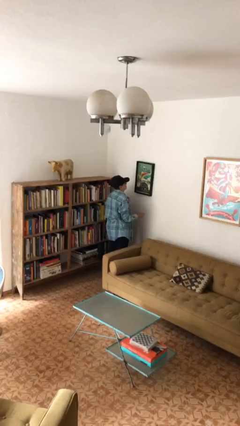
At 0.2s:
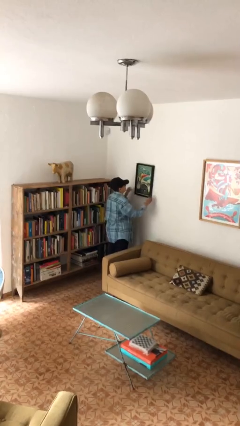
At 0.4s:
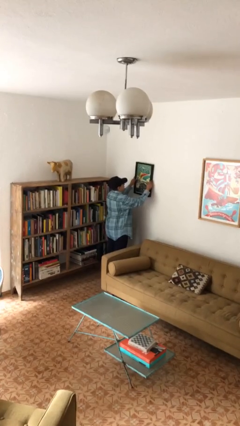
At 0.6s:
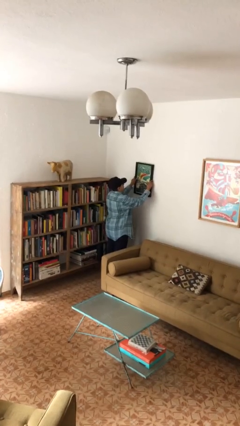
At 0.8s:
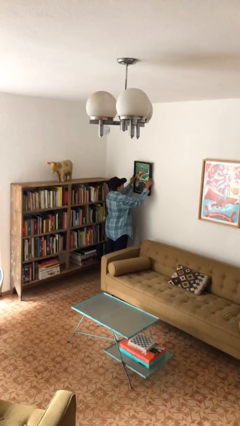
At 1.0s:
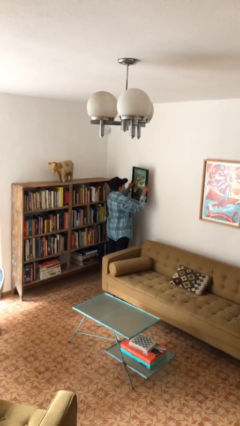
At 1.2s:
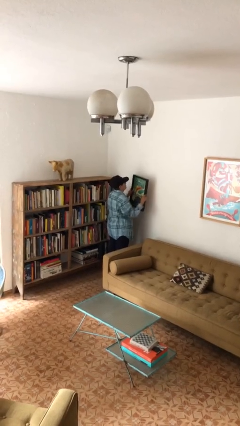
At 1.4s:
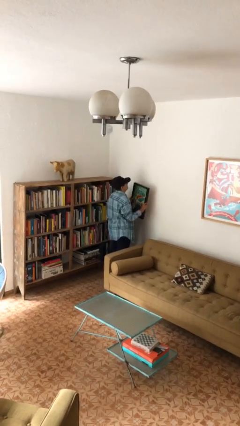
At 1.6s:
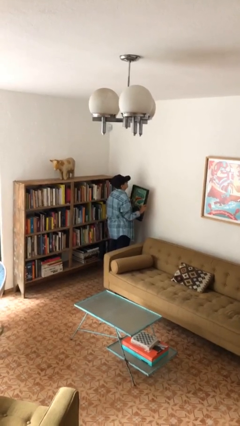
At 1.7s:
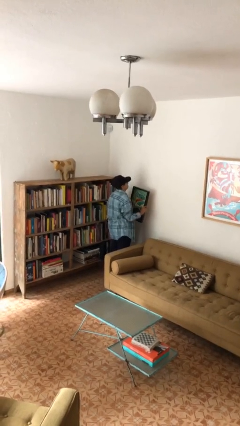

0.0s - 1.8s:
person takes down picture frame

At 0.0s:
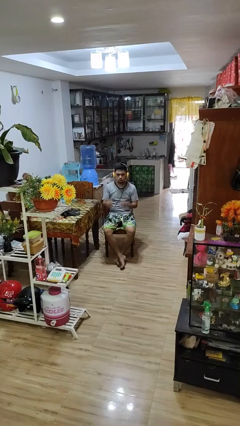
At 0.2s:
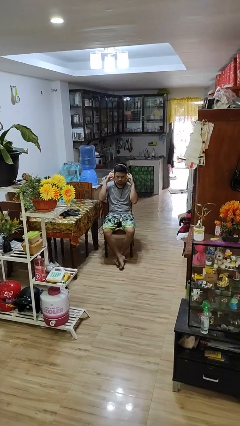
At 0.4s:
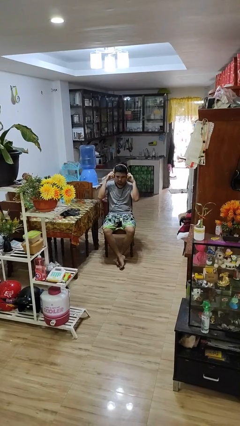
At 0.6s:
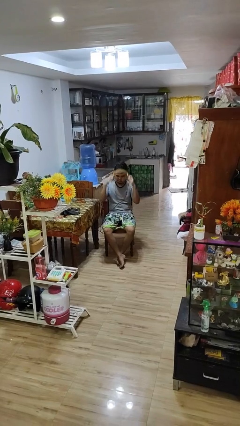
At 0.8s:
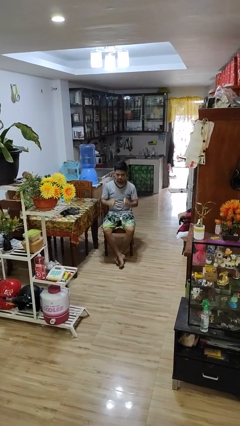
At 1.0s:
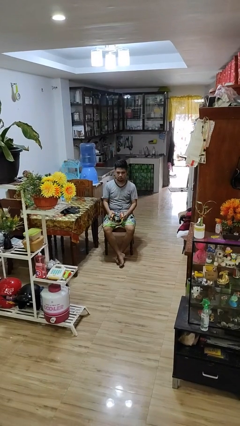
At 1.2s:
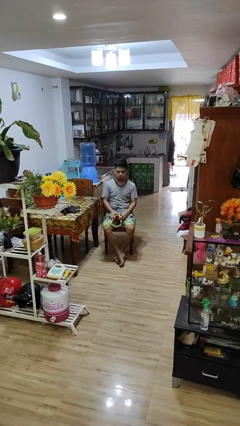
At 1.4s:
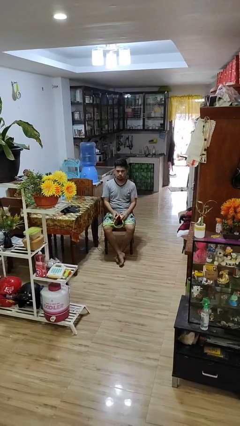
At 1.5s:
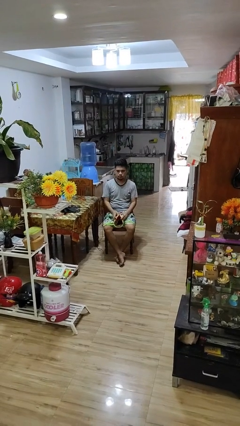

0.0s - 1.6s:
person takes off headphones

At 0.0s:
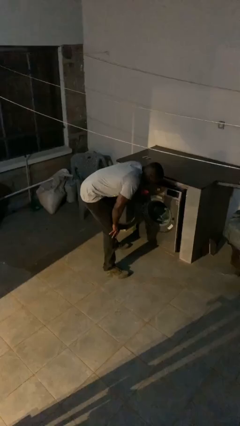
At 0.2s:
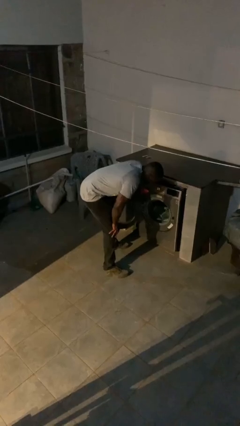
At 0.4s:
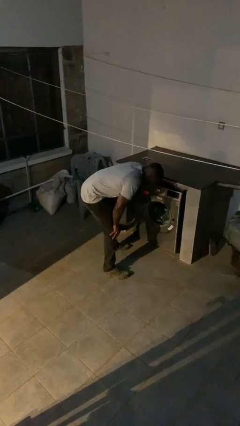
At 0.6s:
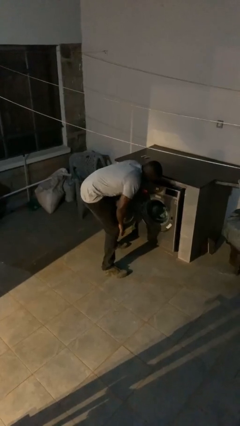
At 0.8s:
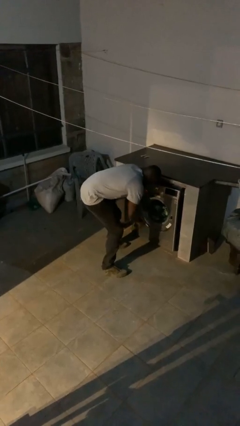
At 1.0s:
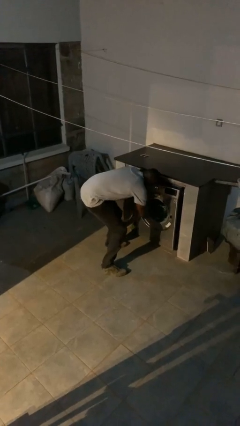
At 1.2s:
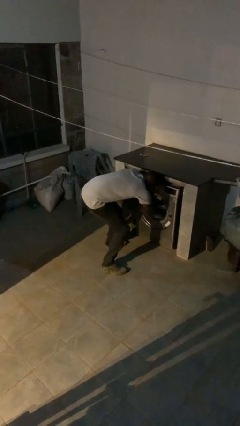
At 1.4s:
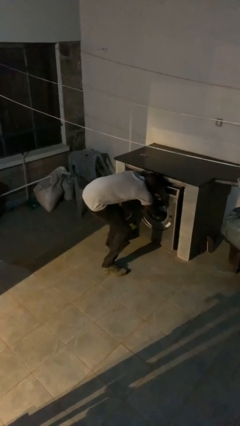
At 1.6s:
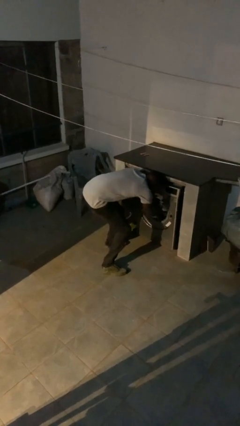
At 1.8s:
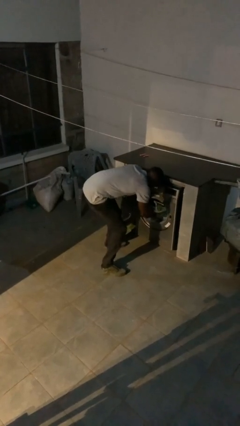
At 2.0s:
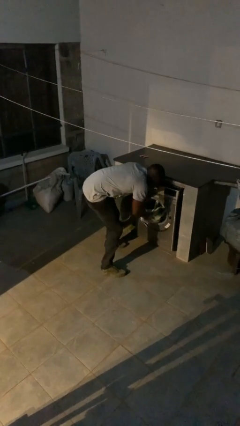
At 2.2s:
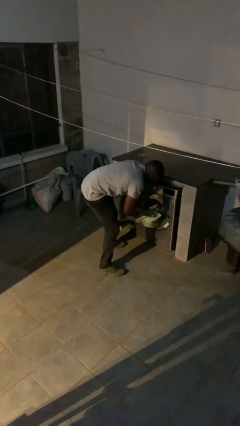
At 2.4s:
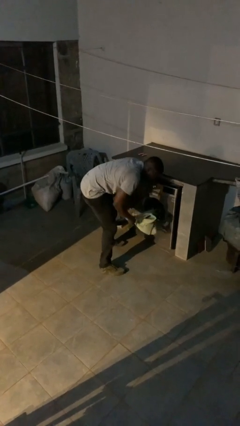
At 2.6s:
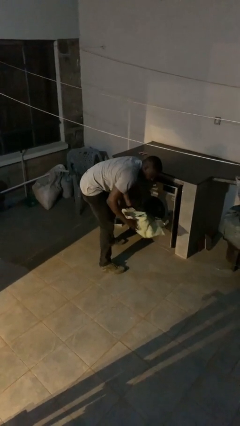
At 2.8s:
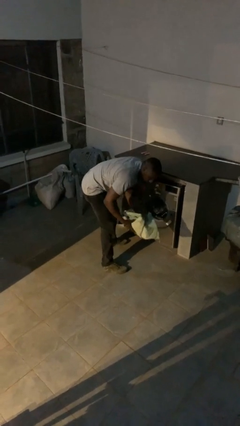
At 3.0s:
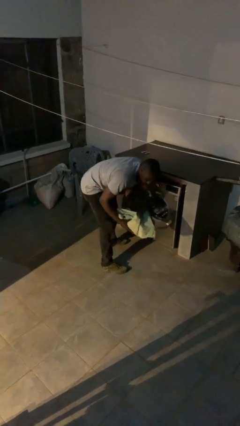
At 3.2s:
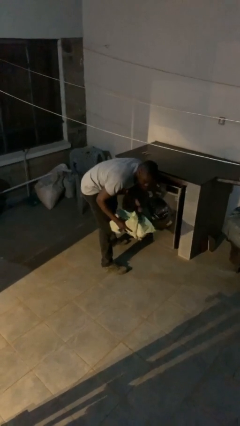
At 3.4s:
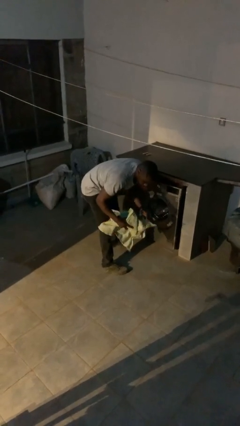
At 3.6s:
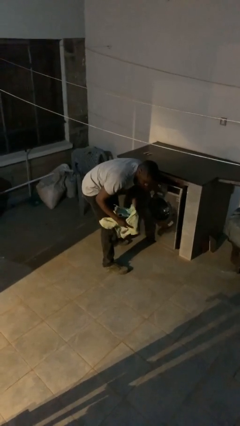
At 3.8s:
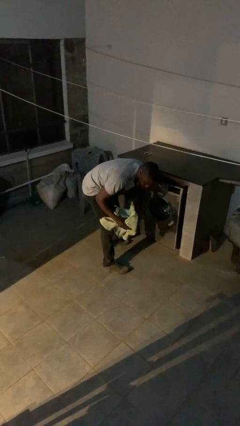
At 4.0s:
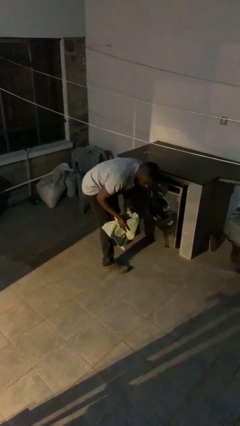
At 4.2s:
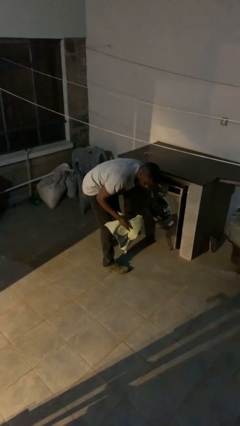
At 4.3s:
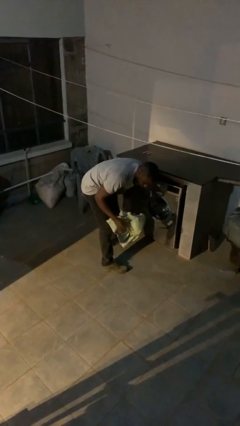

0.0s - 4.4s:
person unloads clotheswasher

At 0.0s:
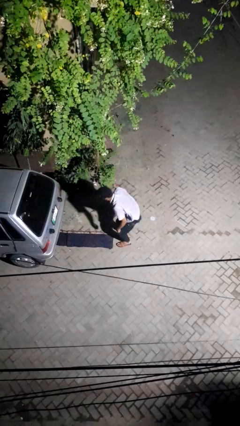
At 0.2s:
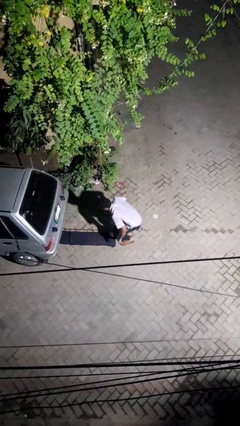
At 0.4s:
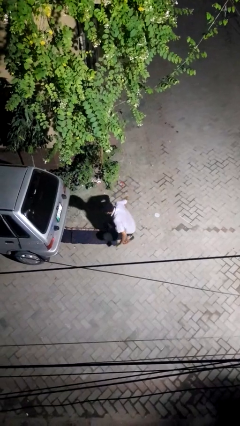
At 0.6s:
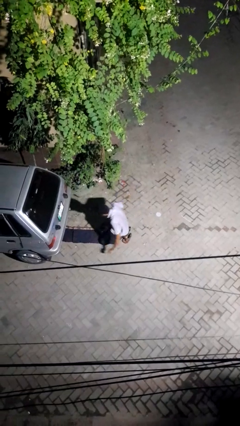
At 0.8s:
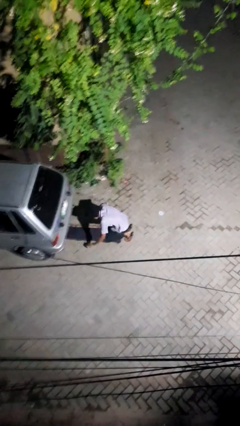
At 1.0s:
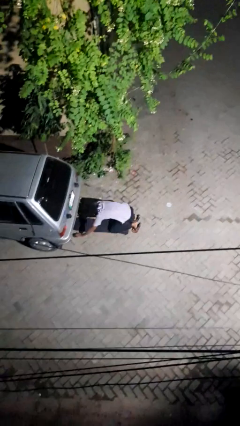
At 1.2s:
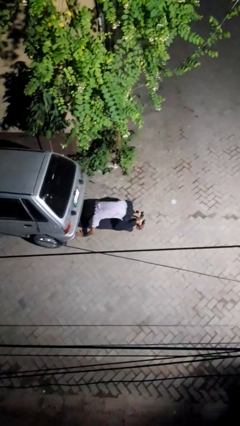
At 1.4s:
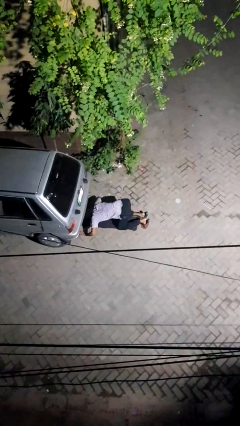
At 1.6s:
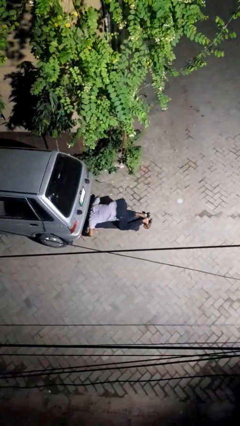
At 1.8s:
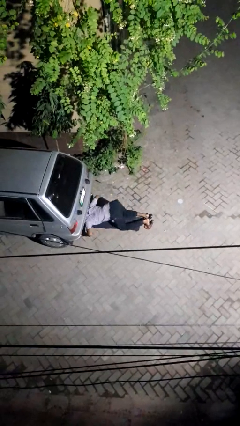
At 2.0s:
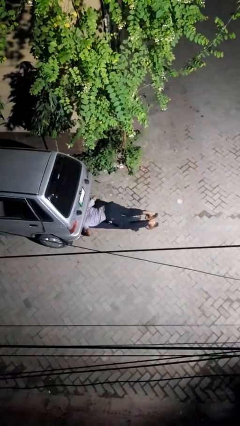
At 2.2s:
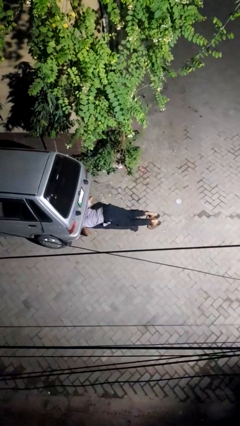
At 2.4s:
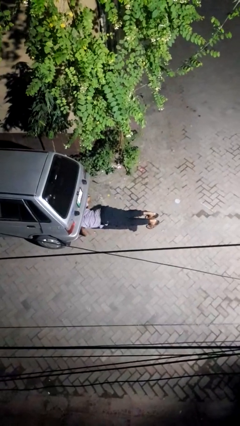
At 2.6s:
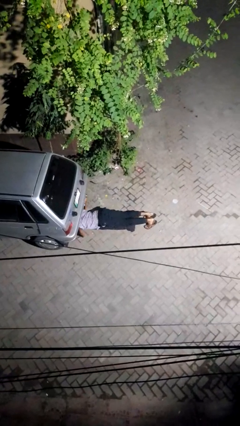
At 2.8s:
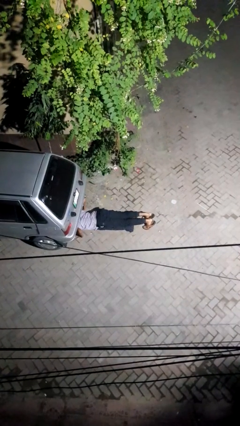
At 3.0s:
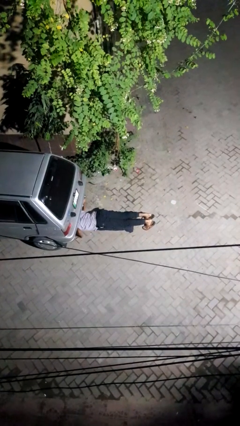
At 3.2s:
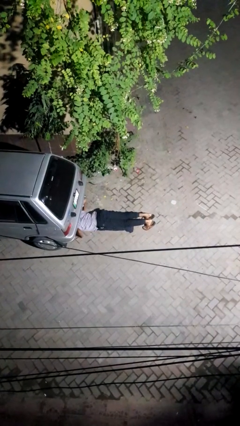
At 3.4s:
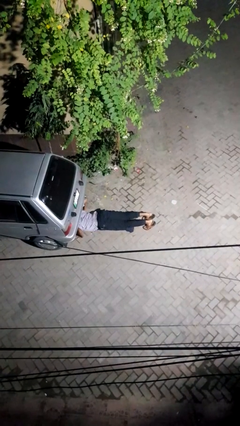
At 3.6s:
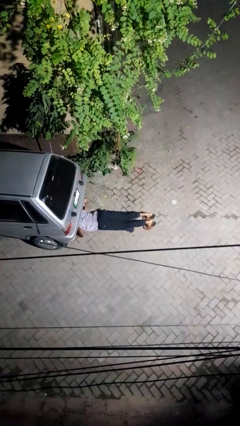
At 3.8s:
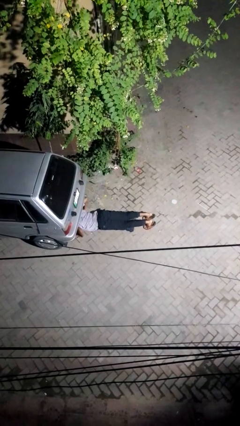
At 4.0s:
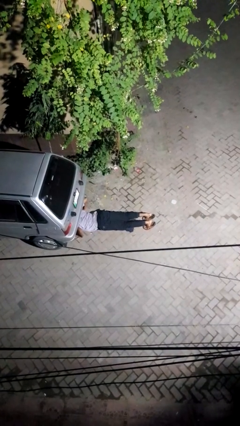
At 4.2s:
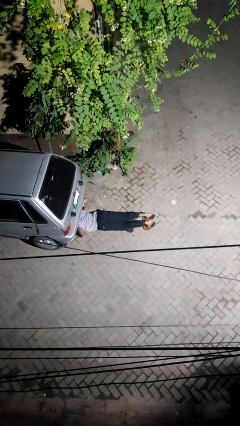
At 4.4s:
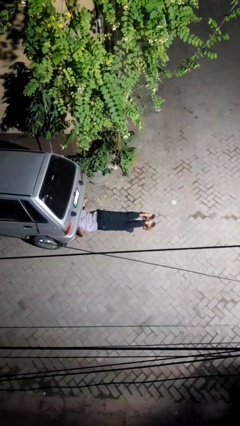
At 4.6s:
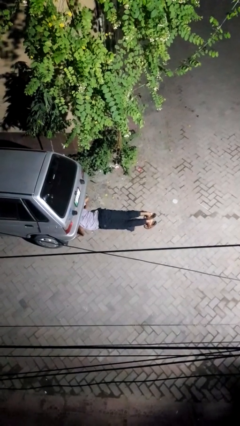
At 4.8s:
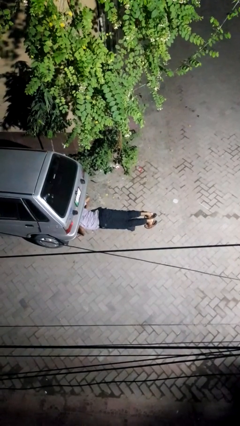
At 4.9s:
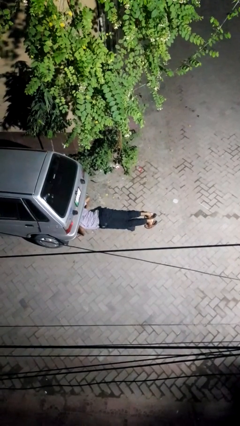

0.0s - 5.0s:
person crawls out from under vehicle

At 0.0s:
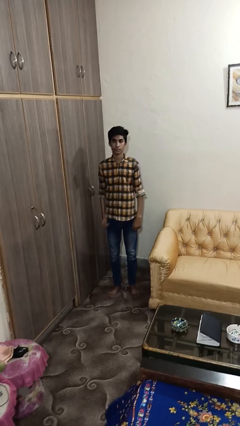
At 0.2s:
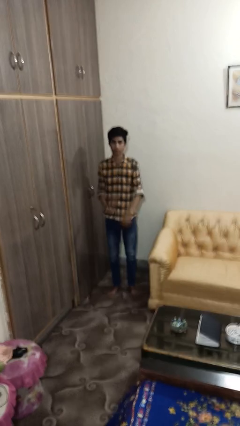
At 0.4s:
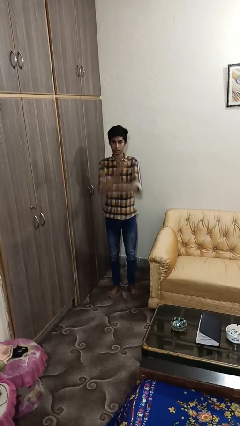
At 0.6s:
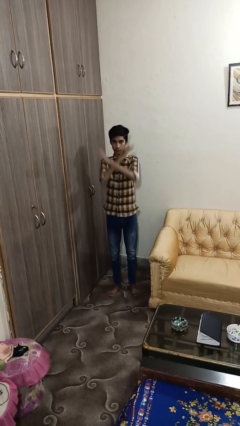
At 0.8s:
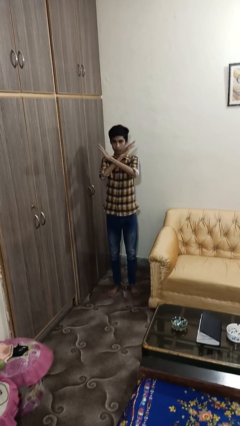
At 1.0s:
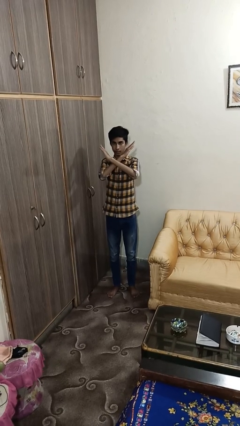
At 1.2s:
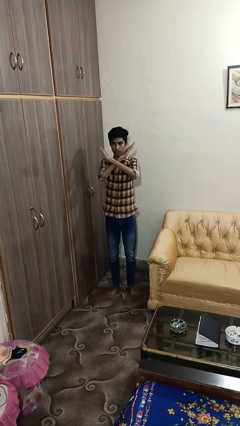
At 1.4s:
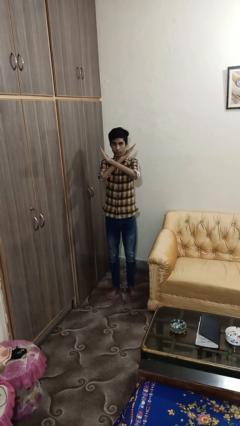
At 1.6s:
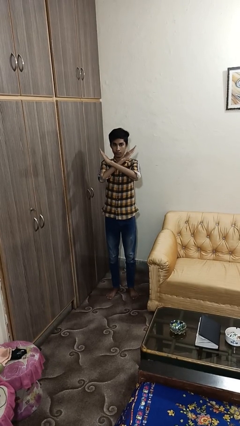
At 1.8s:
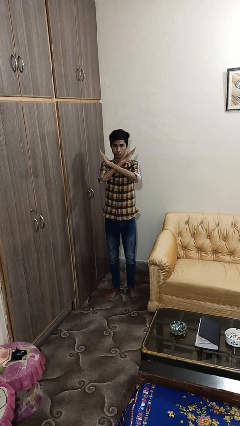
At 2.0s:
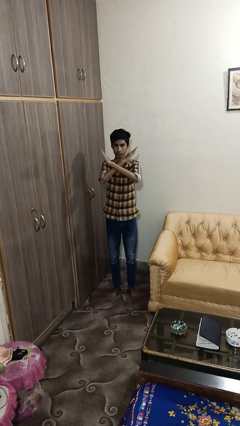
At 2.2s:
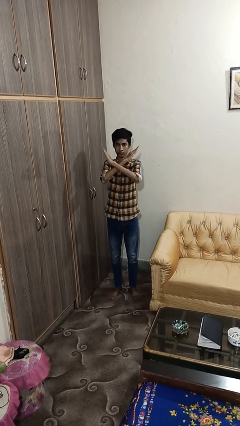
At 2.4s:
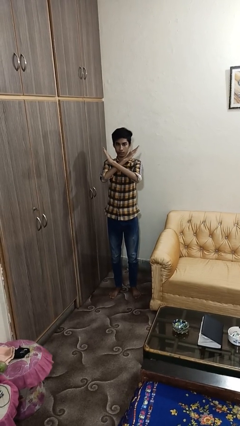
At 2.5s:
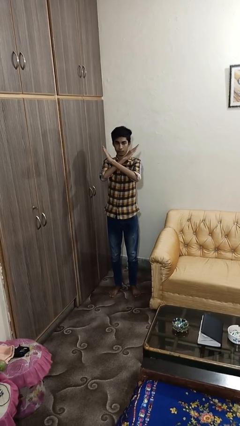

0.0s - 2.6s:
person gestures arms x

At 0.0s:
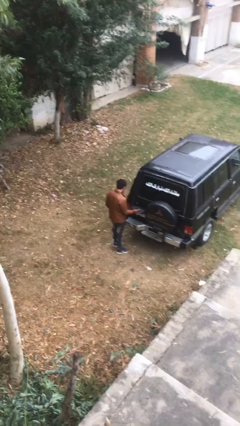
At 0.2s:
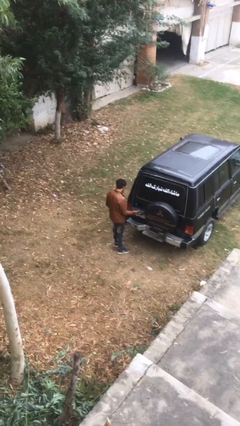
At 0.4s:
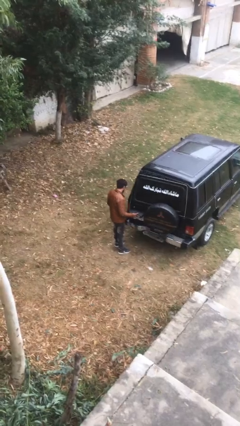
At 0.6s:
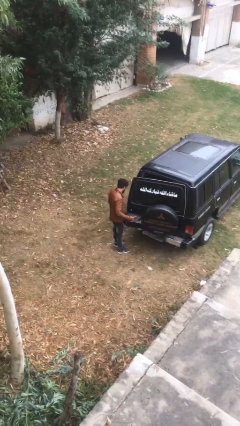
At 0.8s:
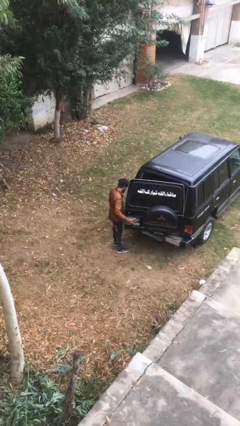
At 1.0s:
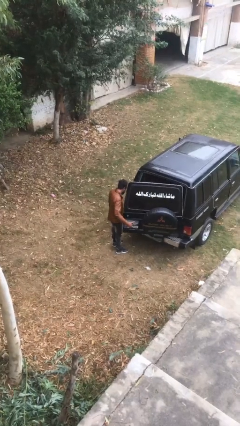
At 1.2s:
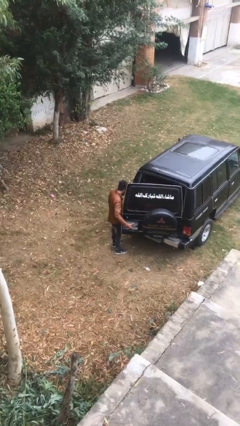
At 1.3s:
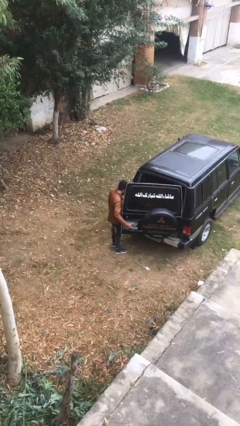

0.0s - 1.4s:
person opens car trunk

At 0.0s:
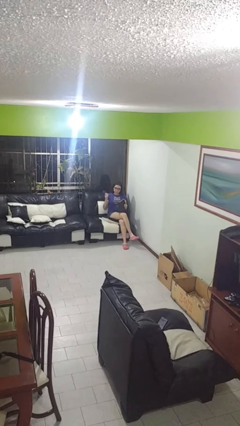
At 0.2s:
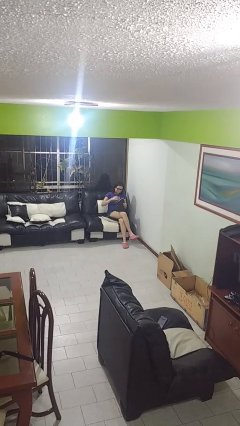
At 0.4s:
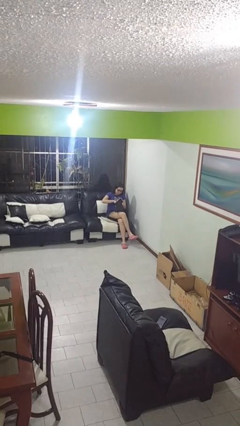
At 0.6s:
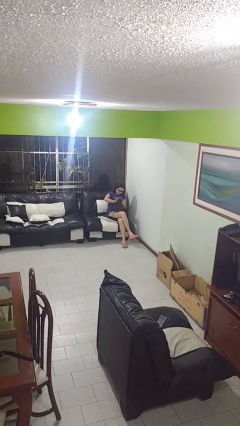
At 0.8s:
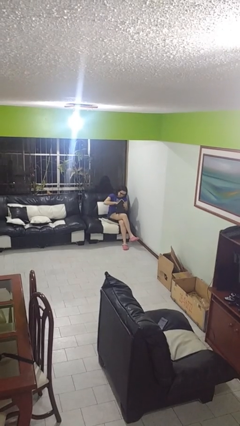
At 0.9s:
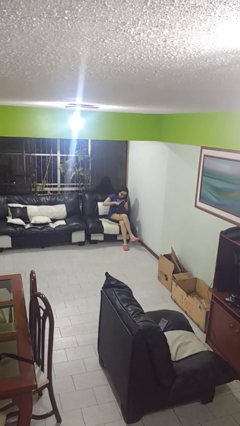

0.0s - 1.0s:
person puts object into purse
